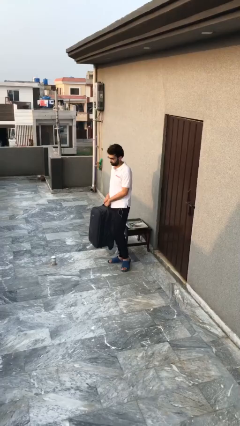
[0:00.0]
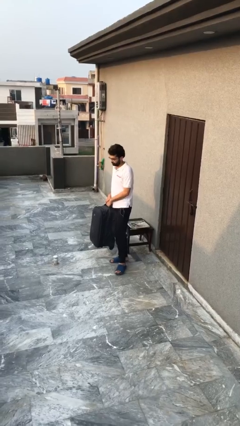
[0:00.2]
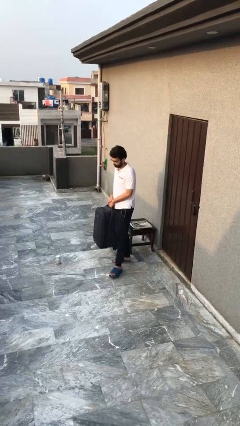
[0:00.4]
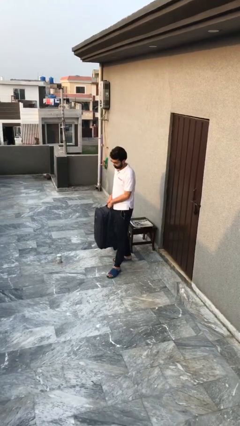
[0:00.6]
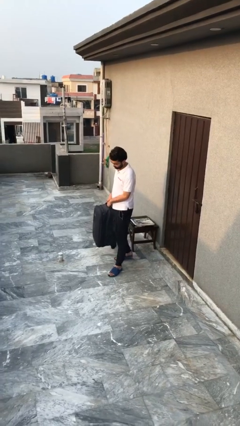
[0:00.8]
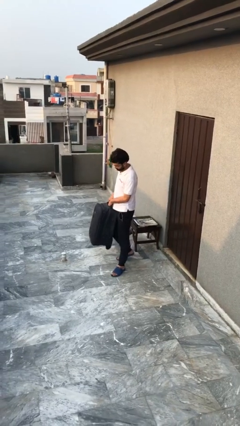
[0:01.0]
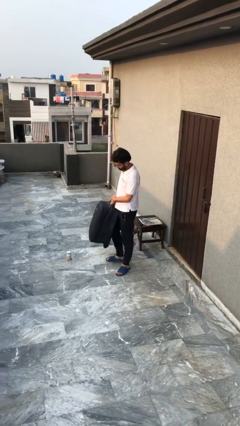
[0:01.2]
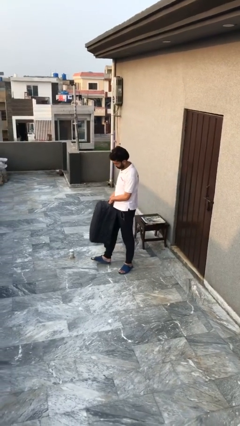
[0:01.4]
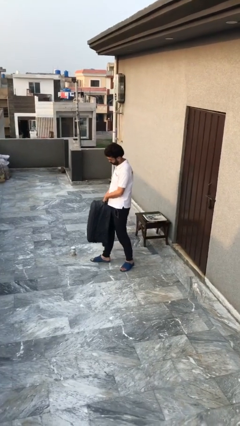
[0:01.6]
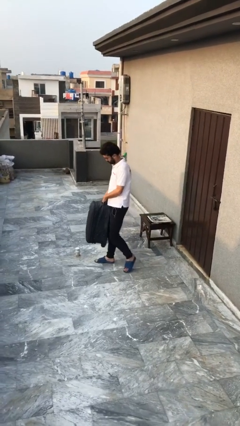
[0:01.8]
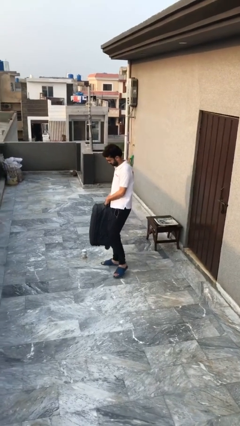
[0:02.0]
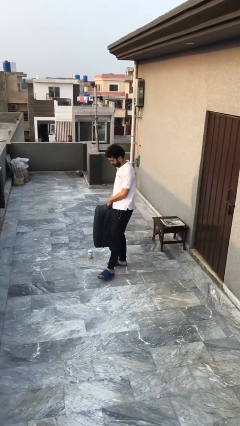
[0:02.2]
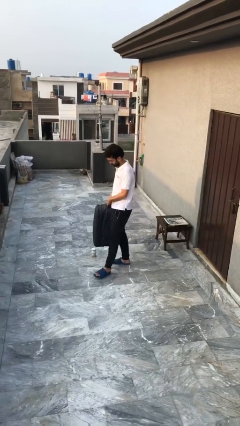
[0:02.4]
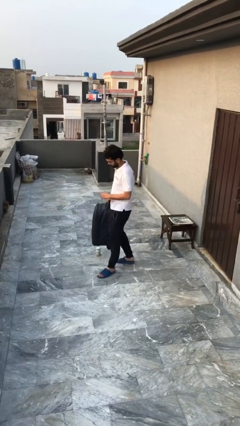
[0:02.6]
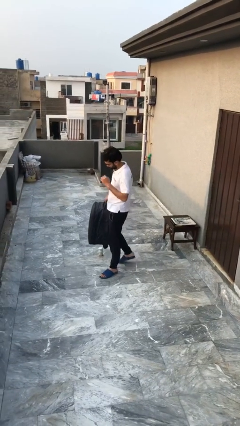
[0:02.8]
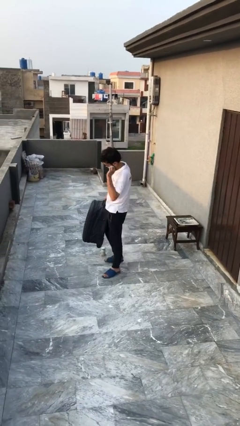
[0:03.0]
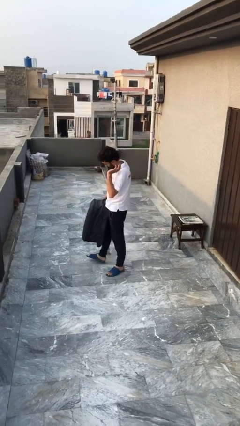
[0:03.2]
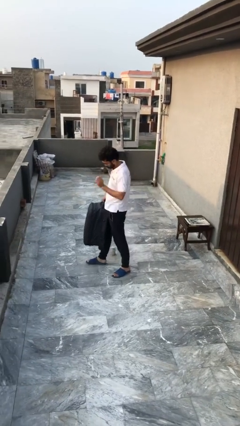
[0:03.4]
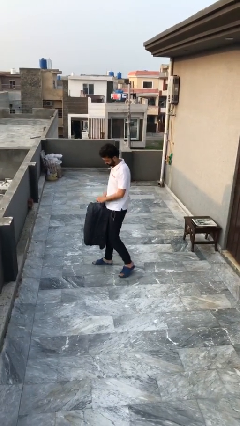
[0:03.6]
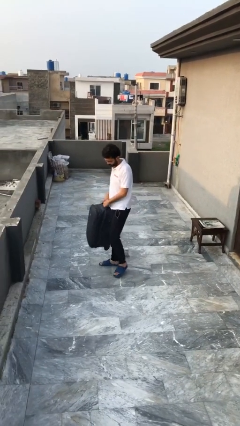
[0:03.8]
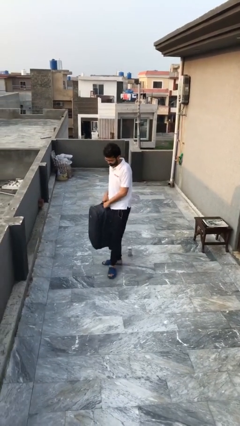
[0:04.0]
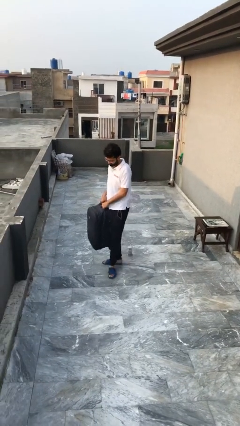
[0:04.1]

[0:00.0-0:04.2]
person carries heavy object

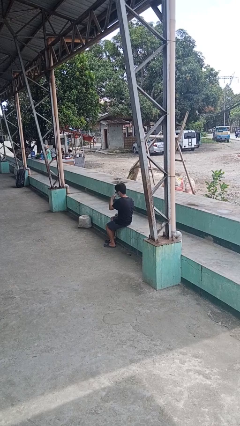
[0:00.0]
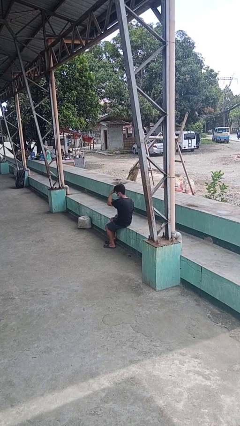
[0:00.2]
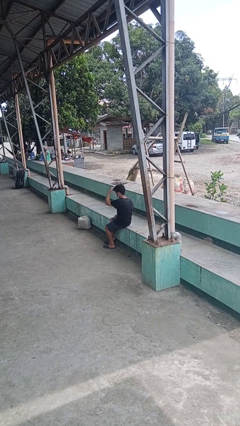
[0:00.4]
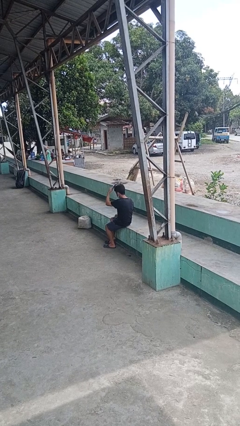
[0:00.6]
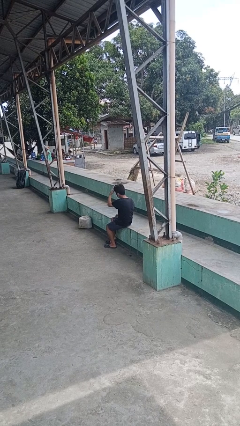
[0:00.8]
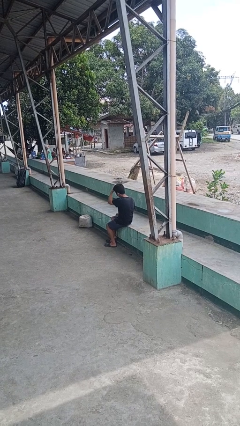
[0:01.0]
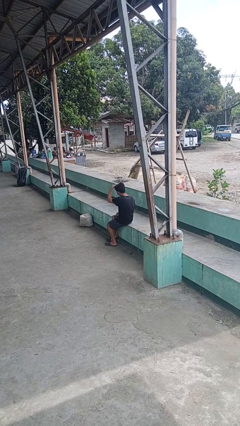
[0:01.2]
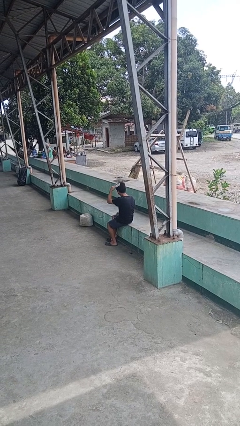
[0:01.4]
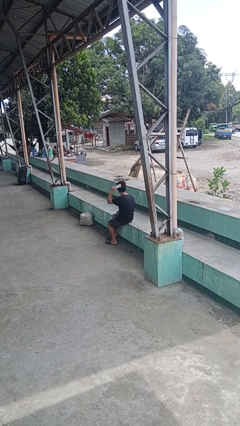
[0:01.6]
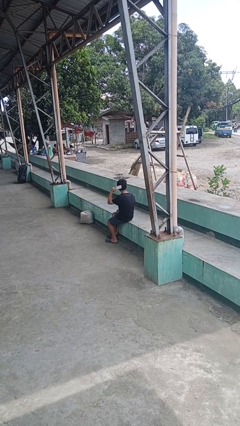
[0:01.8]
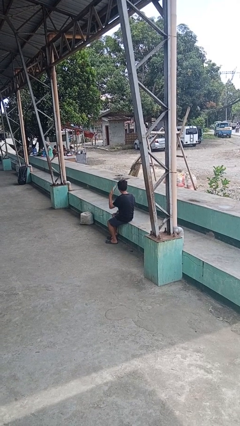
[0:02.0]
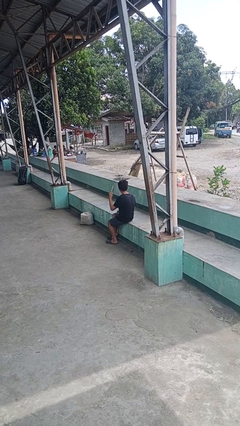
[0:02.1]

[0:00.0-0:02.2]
person brushes hair

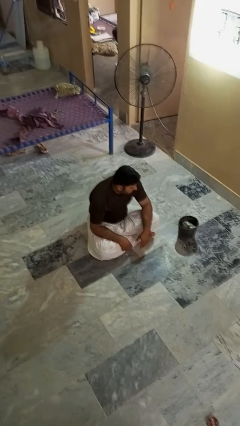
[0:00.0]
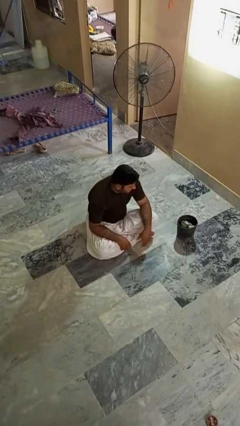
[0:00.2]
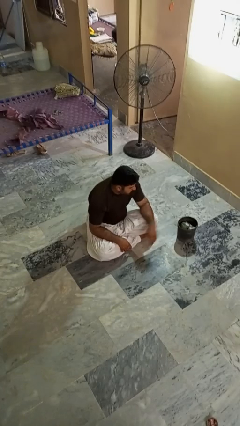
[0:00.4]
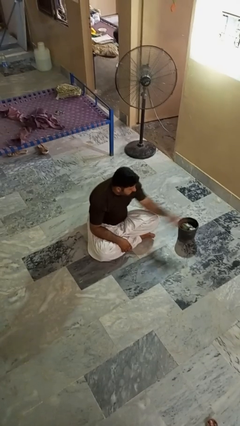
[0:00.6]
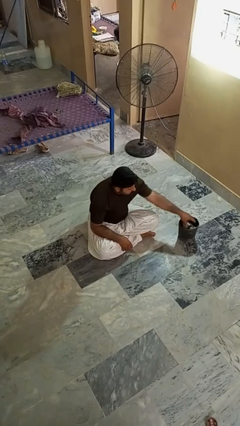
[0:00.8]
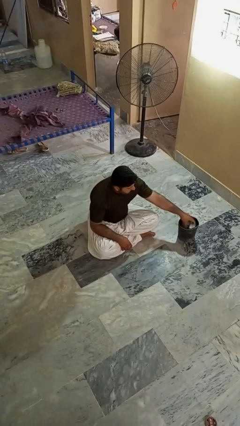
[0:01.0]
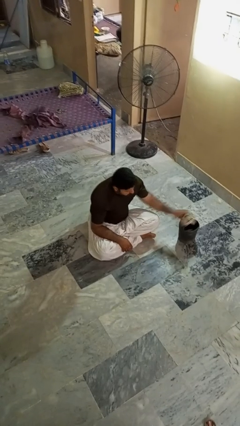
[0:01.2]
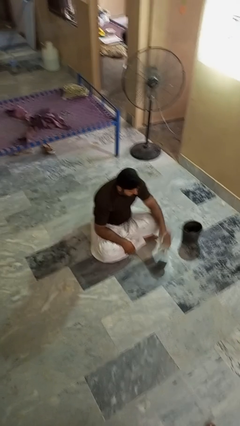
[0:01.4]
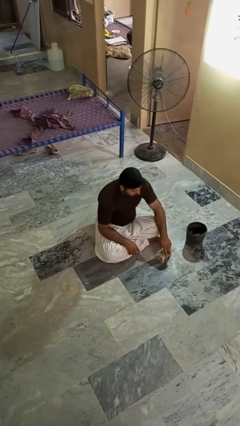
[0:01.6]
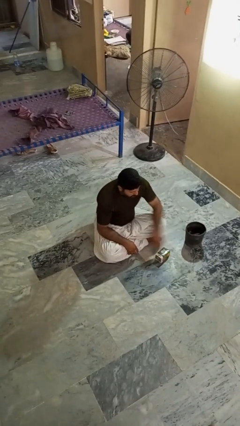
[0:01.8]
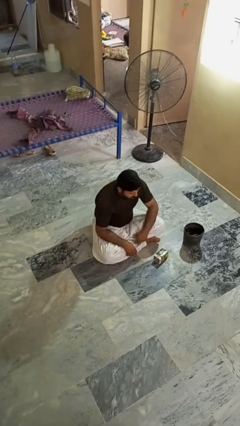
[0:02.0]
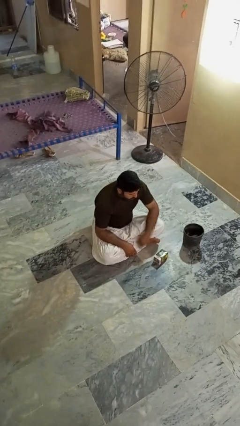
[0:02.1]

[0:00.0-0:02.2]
person takes object from basket

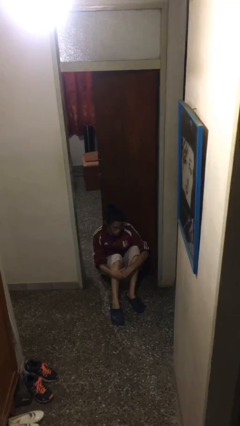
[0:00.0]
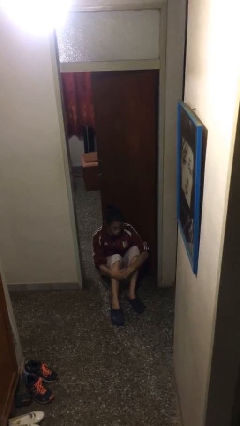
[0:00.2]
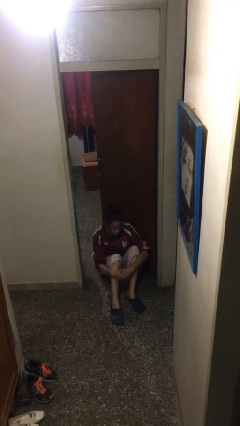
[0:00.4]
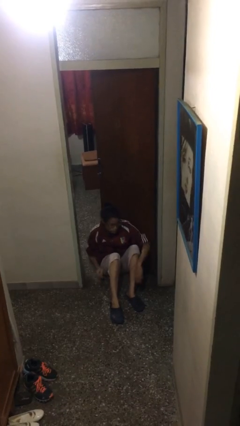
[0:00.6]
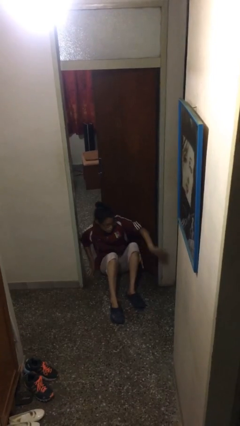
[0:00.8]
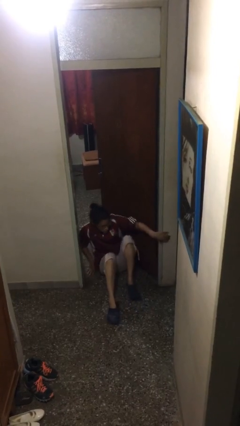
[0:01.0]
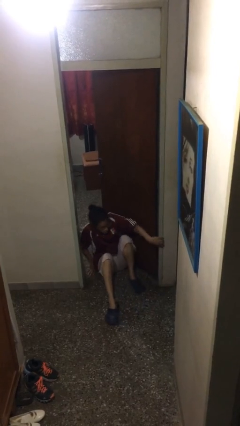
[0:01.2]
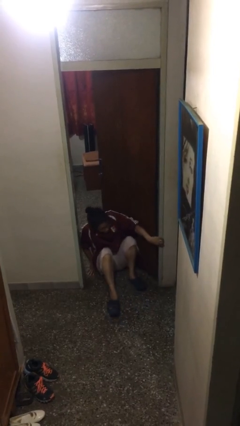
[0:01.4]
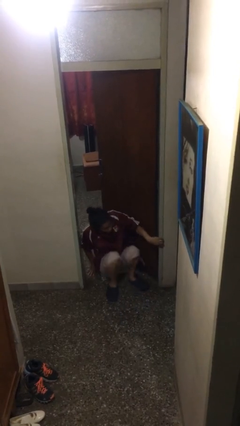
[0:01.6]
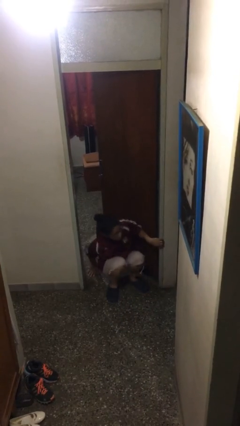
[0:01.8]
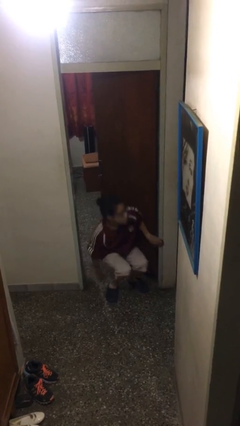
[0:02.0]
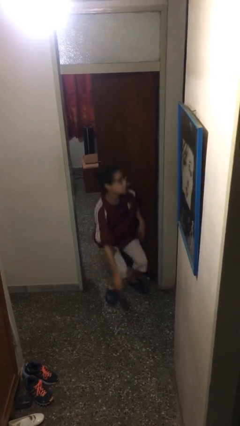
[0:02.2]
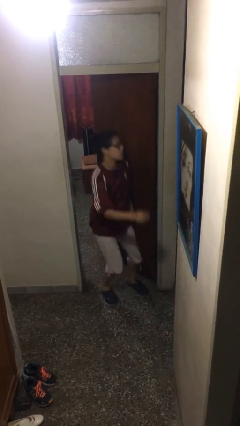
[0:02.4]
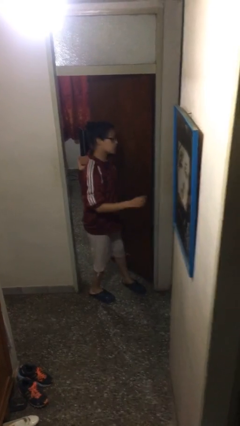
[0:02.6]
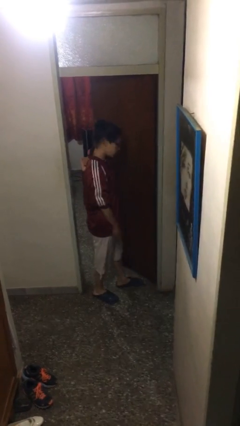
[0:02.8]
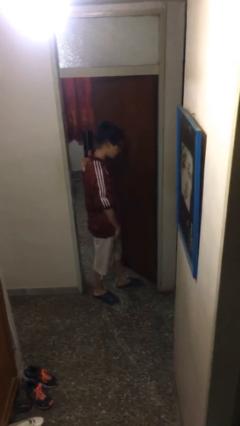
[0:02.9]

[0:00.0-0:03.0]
person stands up

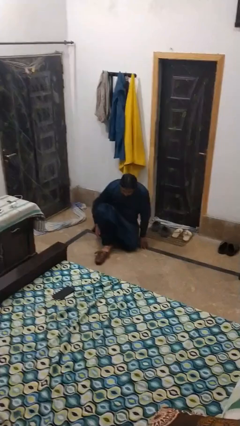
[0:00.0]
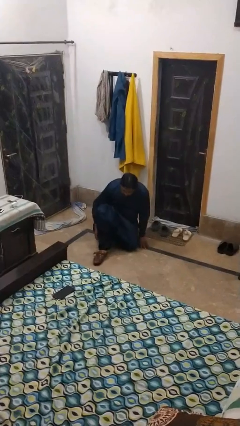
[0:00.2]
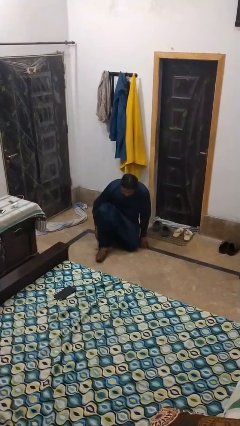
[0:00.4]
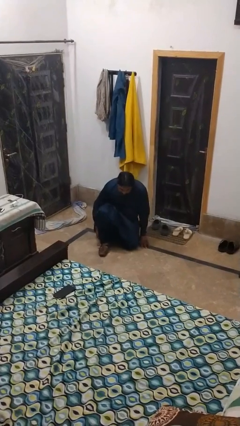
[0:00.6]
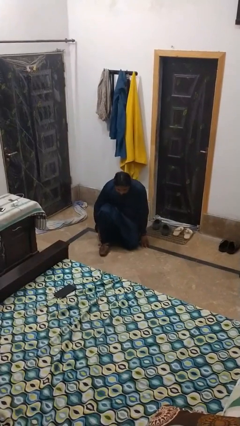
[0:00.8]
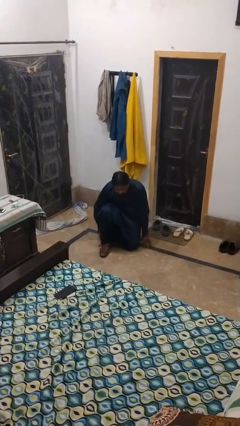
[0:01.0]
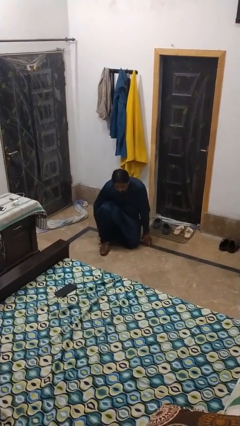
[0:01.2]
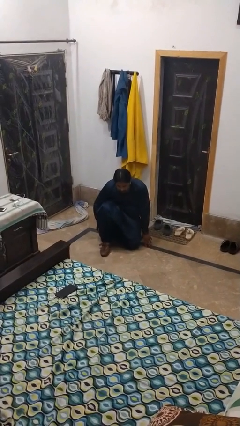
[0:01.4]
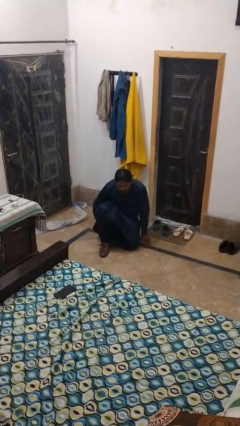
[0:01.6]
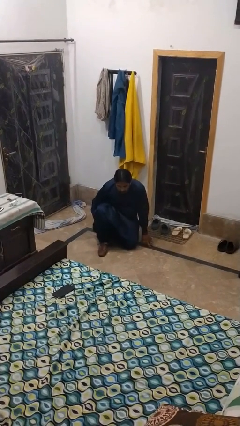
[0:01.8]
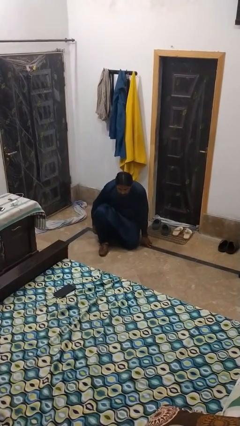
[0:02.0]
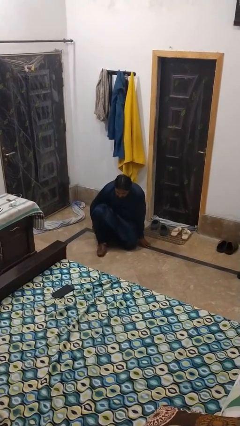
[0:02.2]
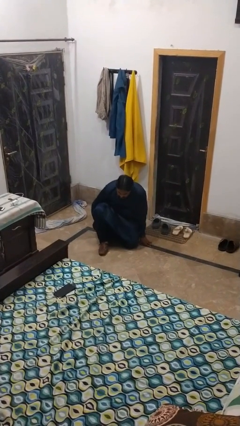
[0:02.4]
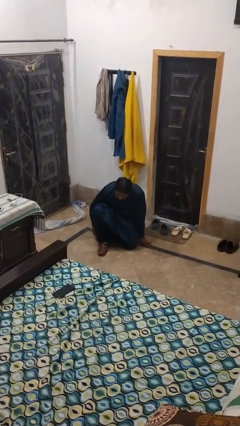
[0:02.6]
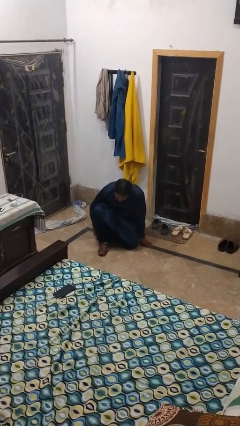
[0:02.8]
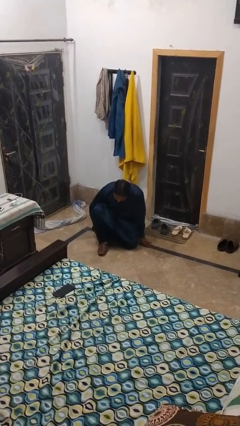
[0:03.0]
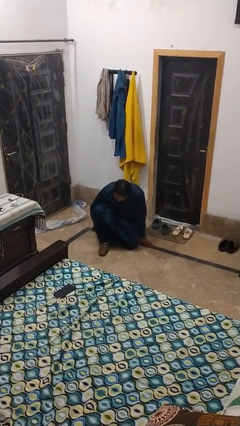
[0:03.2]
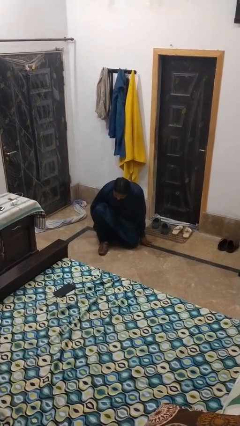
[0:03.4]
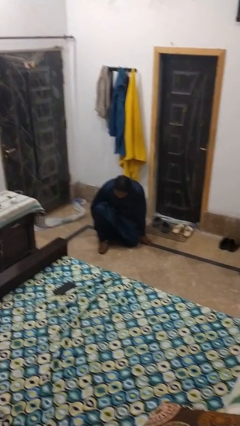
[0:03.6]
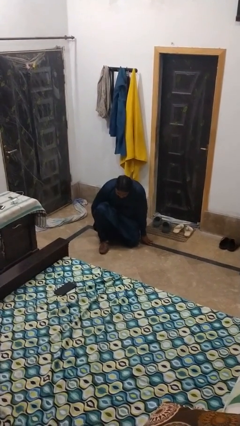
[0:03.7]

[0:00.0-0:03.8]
person puts on shoes

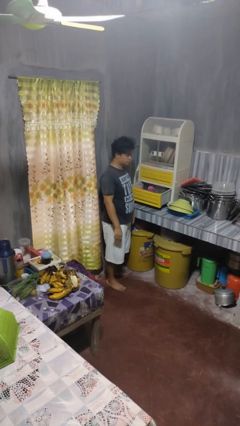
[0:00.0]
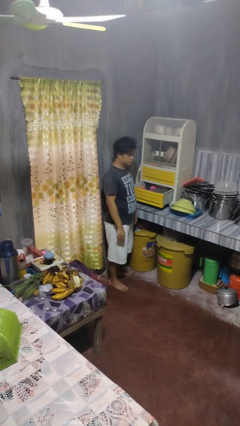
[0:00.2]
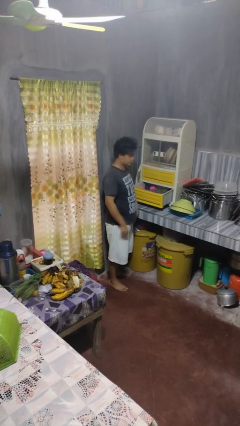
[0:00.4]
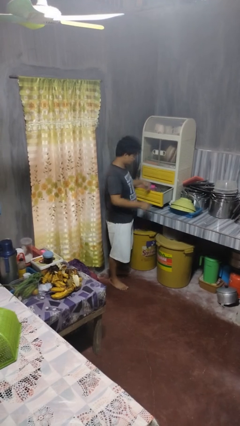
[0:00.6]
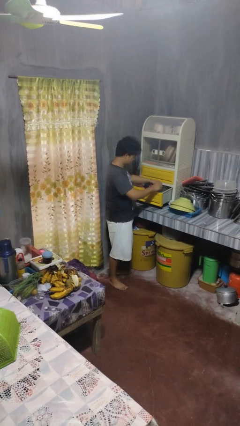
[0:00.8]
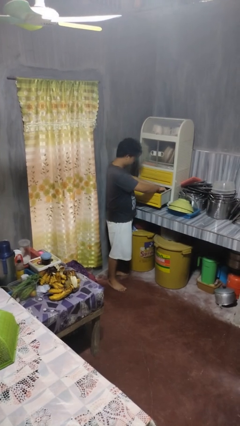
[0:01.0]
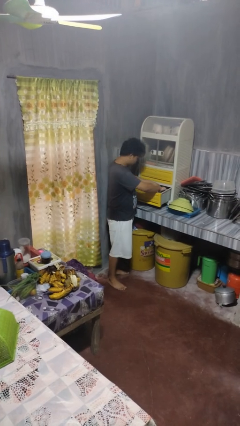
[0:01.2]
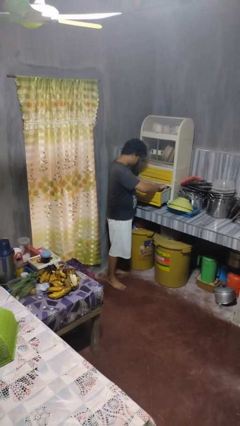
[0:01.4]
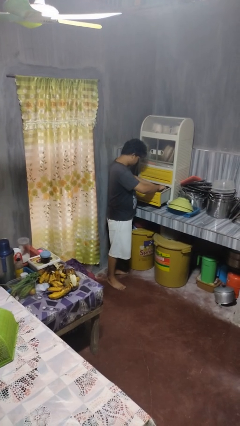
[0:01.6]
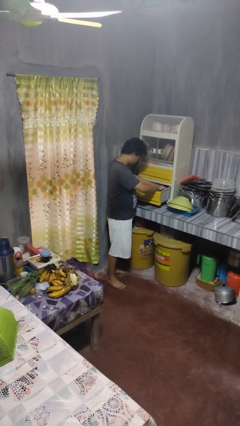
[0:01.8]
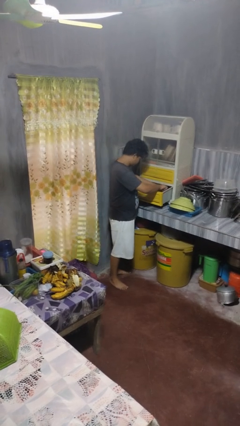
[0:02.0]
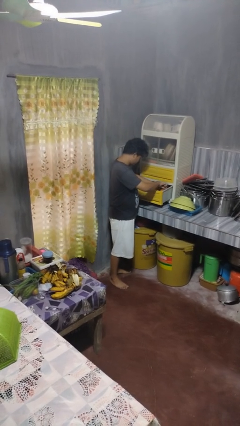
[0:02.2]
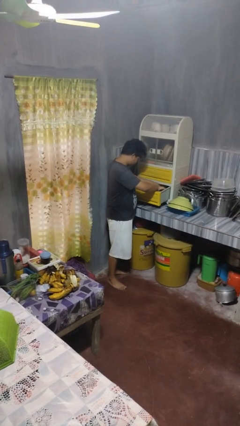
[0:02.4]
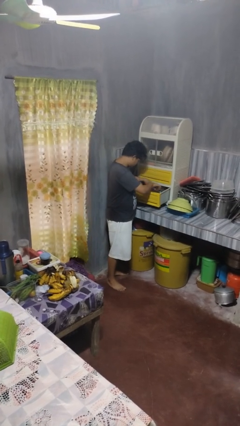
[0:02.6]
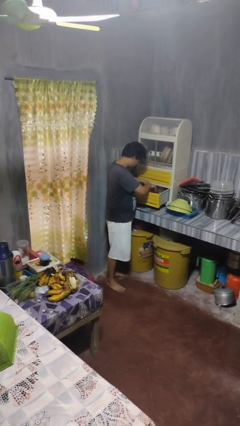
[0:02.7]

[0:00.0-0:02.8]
person searches in kitchen drawer
